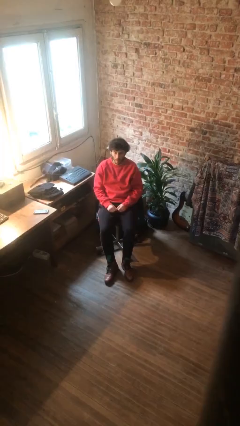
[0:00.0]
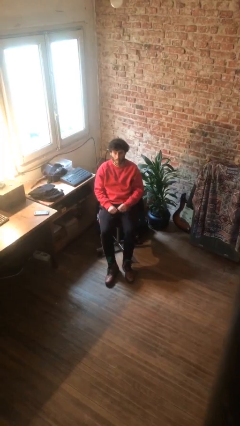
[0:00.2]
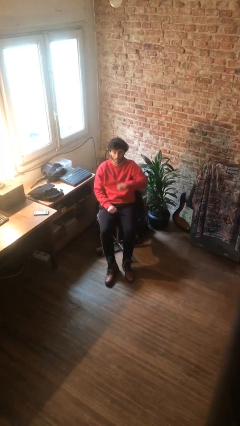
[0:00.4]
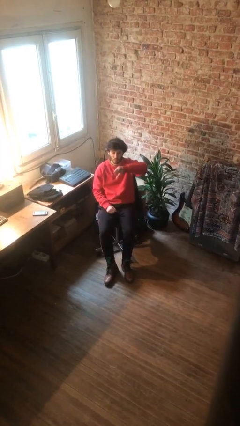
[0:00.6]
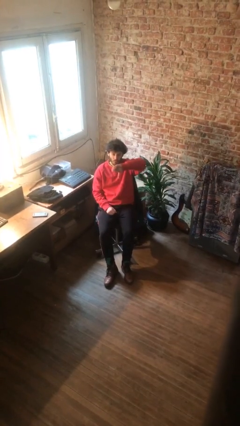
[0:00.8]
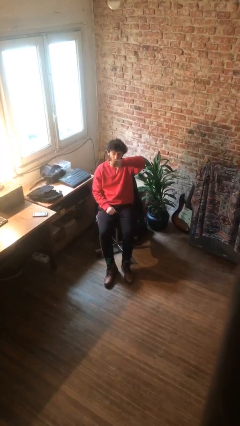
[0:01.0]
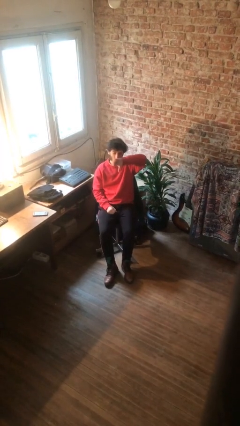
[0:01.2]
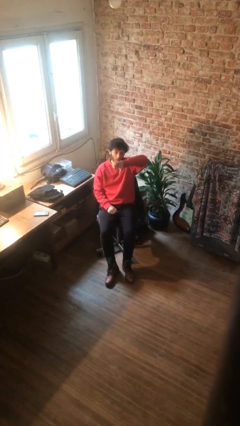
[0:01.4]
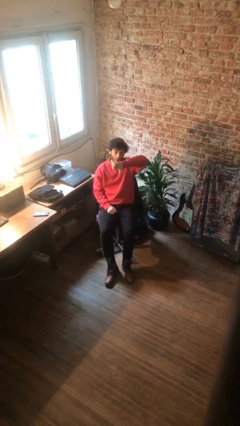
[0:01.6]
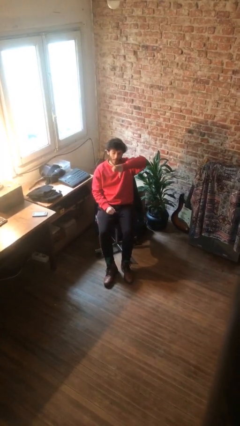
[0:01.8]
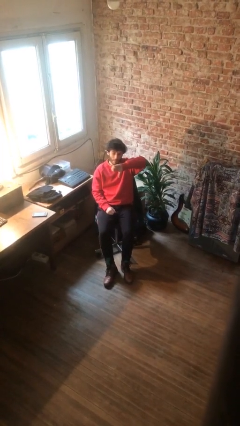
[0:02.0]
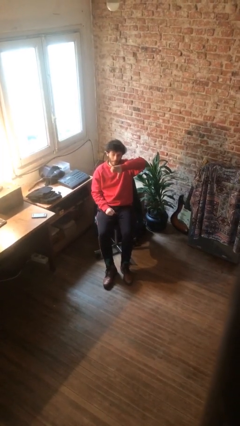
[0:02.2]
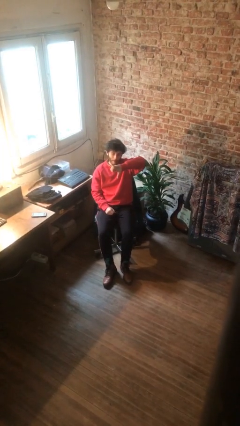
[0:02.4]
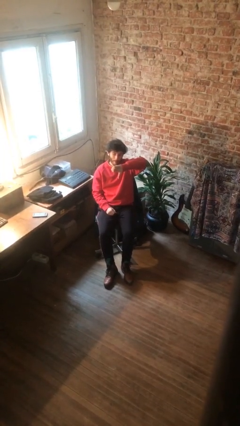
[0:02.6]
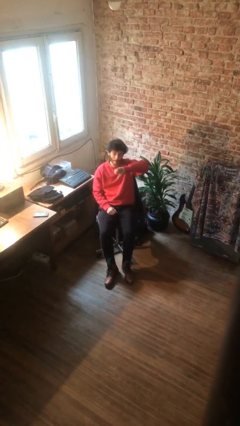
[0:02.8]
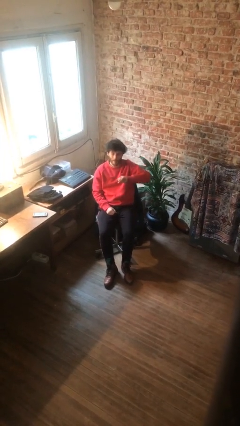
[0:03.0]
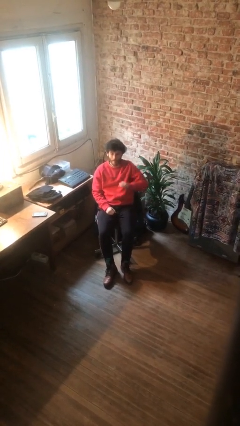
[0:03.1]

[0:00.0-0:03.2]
person gestures thumbs down

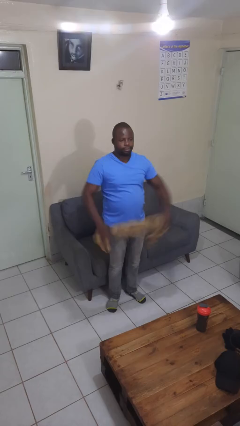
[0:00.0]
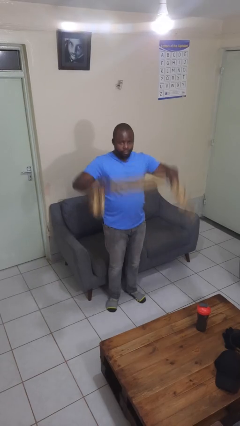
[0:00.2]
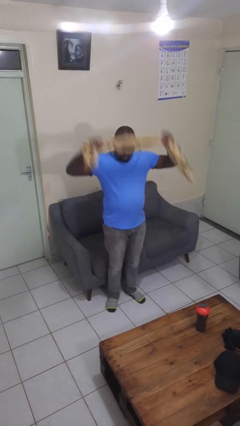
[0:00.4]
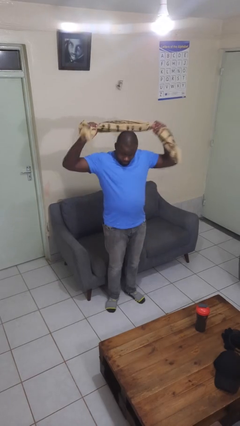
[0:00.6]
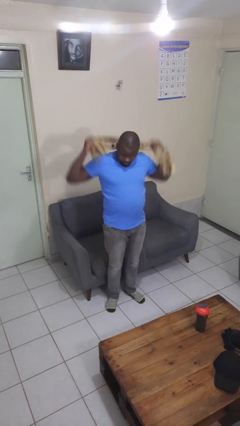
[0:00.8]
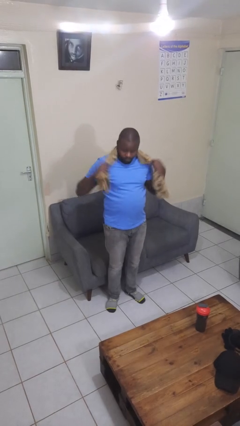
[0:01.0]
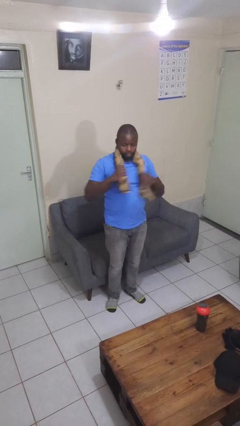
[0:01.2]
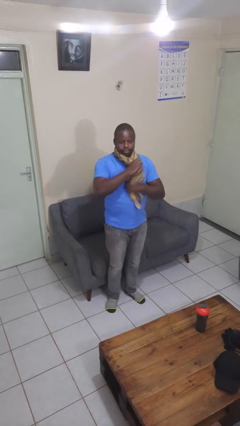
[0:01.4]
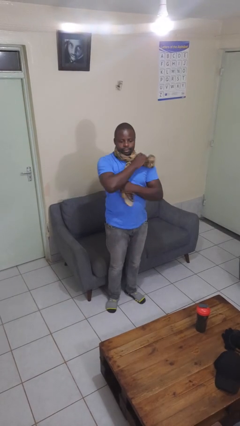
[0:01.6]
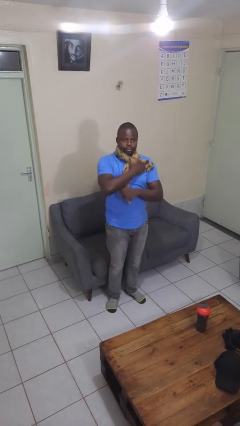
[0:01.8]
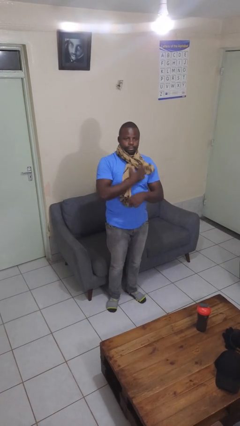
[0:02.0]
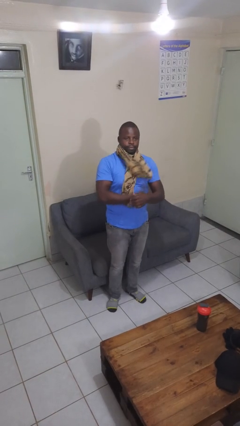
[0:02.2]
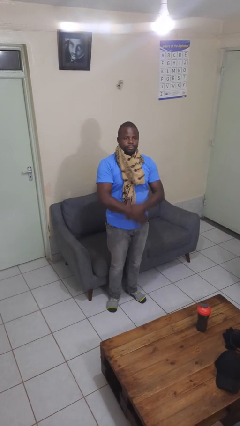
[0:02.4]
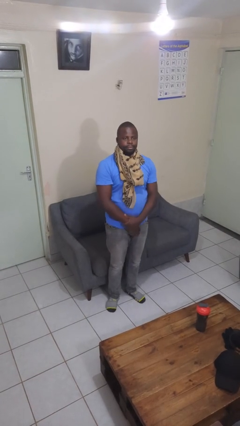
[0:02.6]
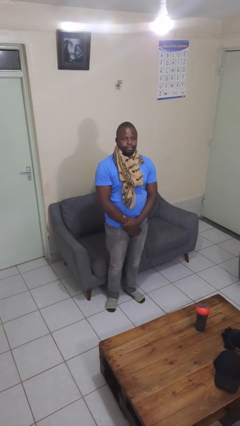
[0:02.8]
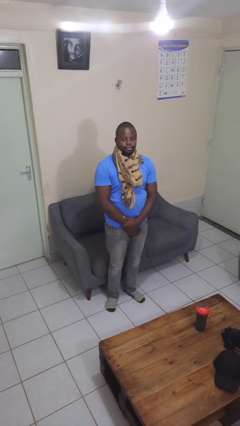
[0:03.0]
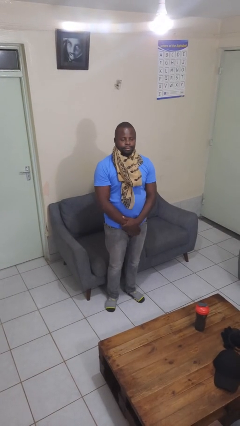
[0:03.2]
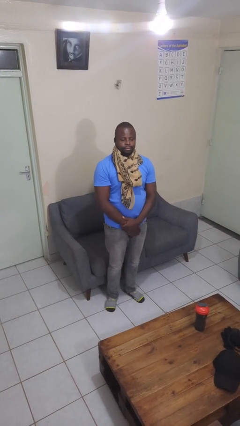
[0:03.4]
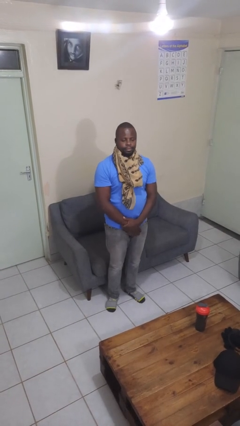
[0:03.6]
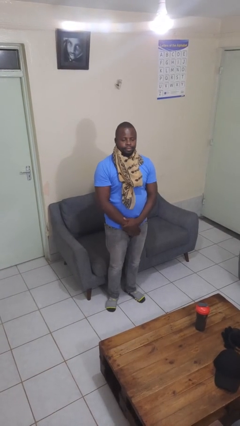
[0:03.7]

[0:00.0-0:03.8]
person puts on scarf

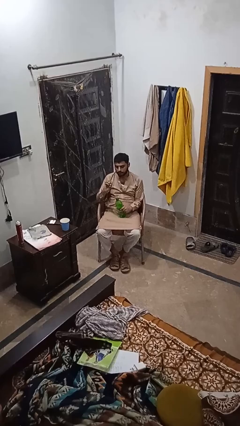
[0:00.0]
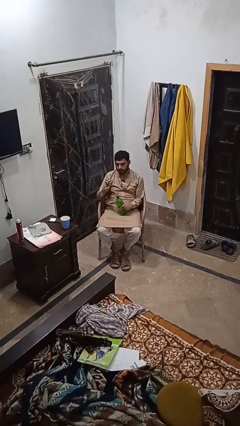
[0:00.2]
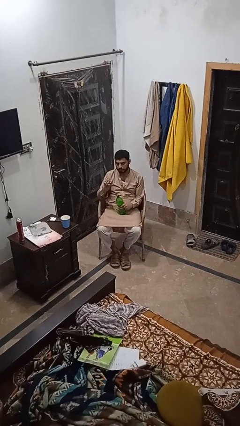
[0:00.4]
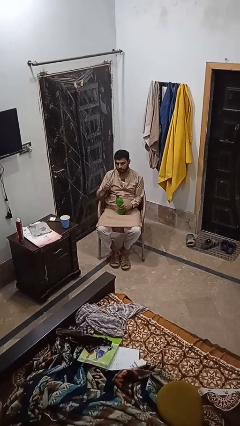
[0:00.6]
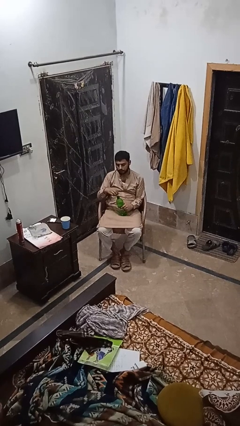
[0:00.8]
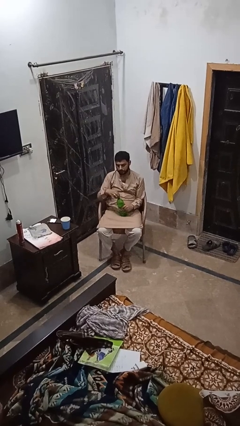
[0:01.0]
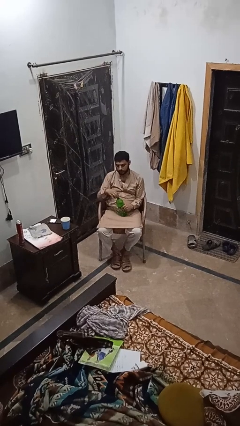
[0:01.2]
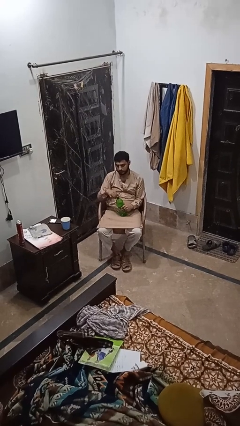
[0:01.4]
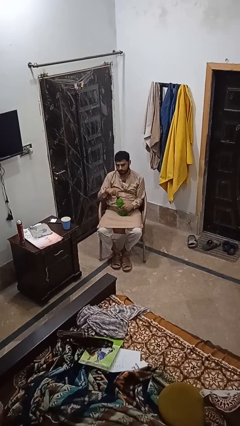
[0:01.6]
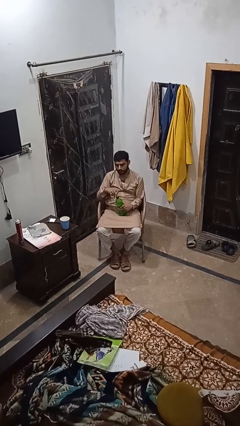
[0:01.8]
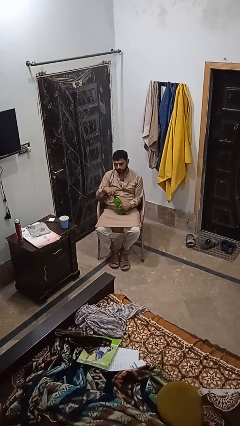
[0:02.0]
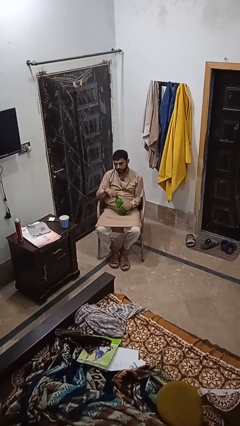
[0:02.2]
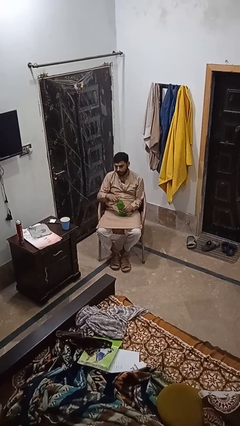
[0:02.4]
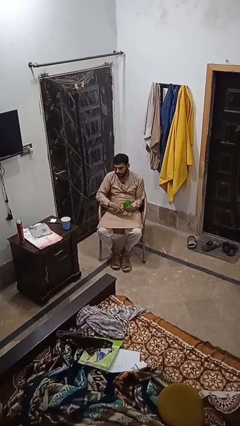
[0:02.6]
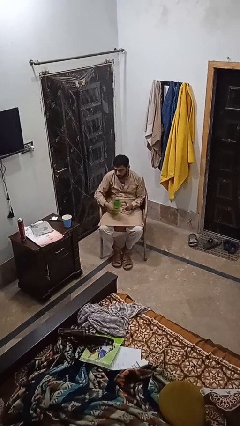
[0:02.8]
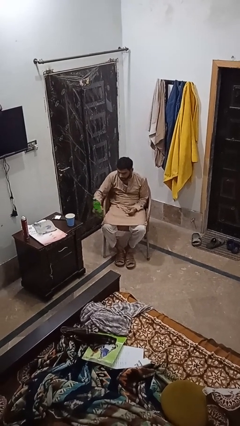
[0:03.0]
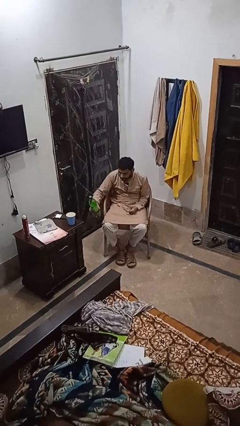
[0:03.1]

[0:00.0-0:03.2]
person screws lid to bottle

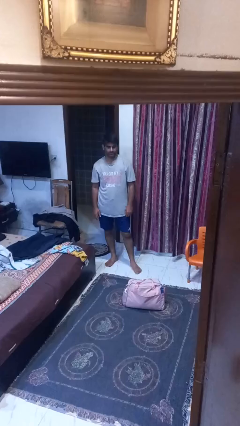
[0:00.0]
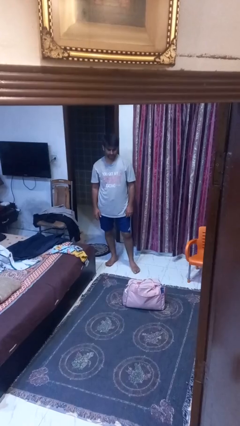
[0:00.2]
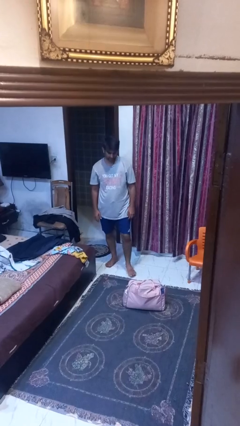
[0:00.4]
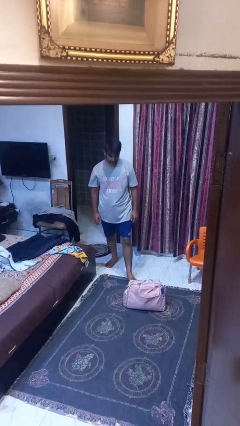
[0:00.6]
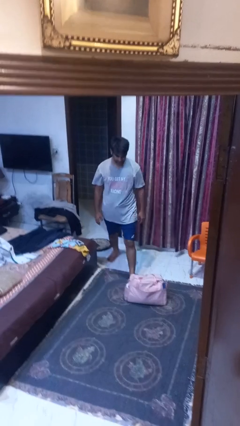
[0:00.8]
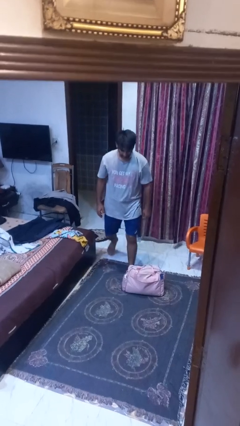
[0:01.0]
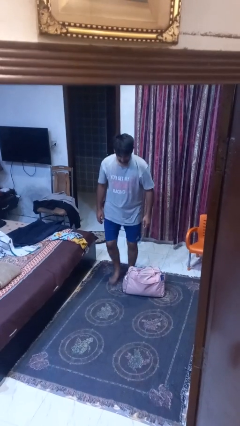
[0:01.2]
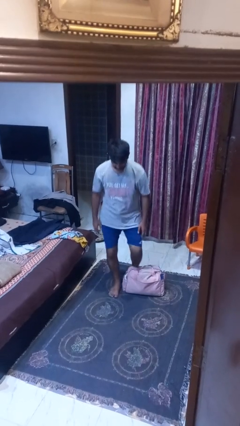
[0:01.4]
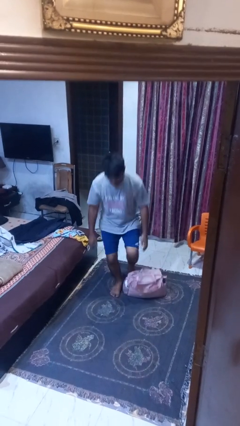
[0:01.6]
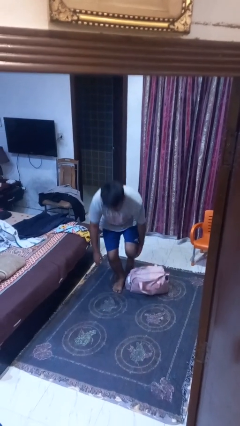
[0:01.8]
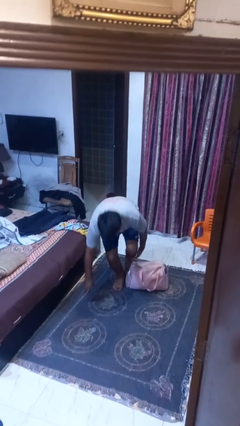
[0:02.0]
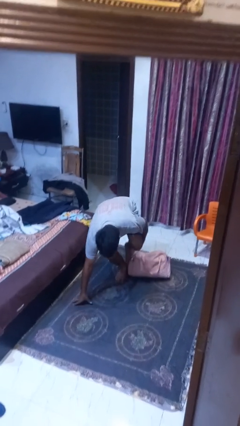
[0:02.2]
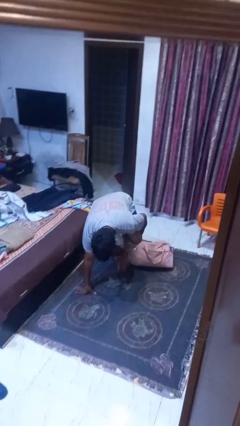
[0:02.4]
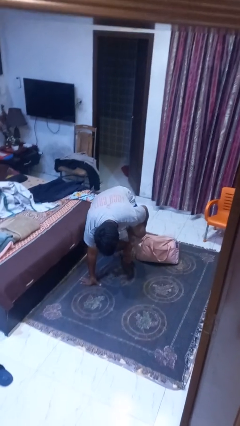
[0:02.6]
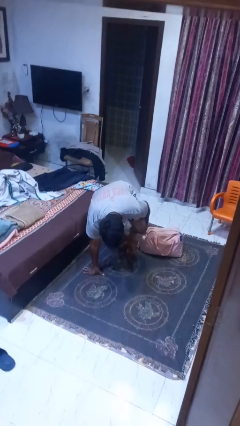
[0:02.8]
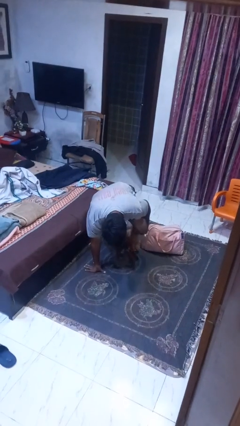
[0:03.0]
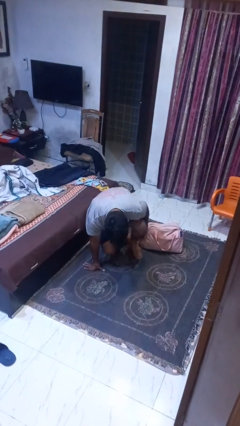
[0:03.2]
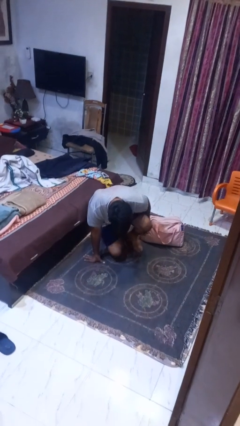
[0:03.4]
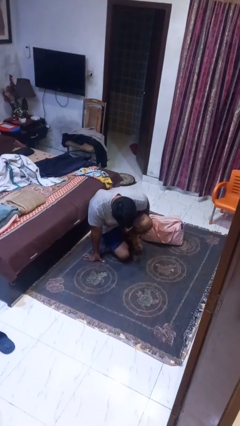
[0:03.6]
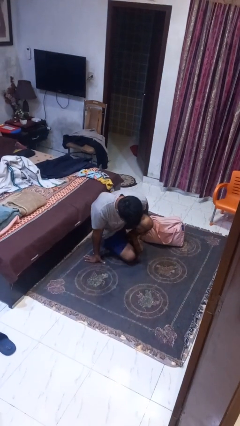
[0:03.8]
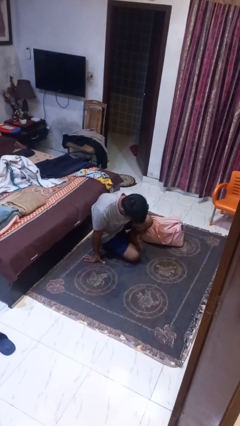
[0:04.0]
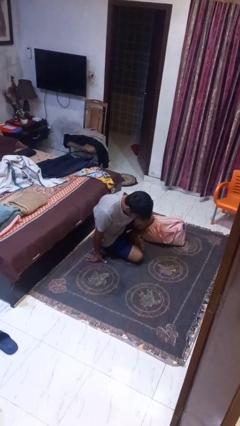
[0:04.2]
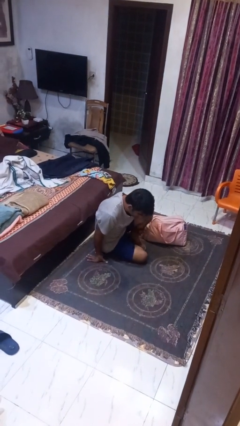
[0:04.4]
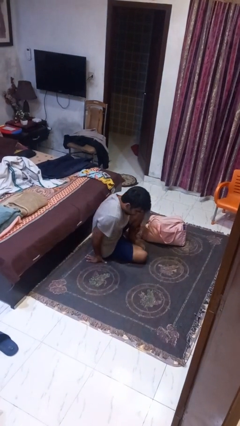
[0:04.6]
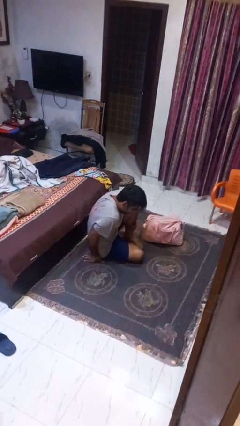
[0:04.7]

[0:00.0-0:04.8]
person trips on object on floor

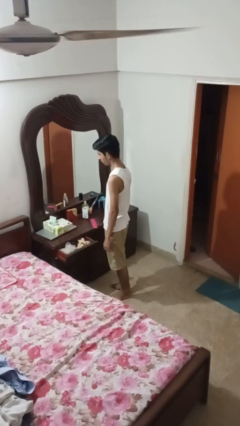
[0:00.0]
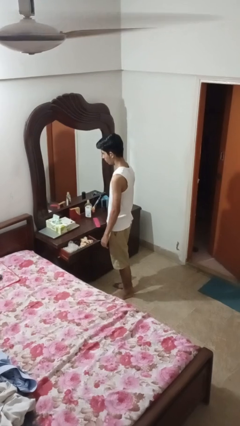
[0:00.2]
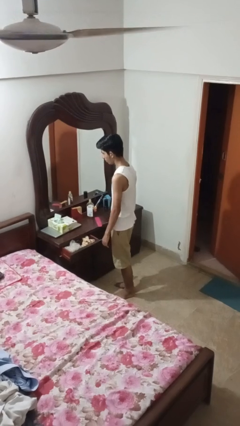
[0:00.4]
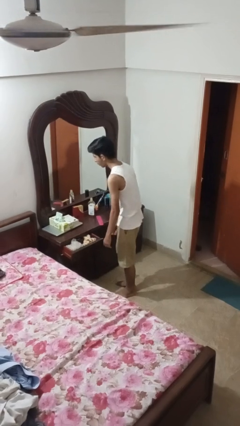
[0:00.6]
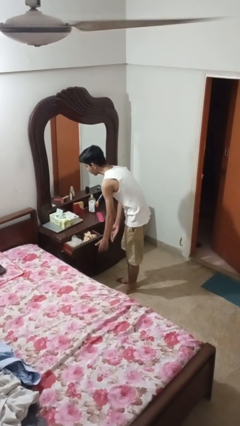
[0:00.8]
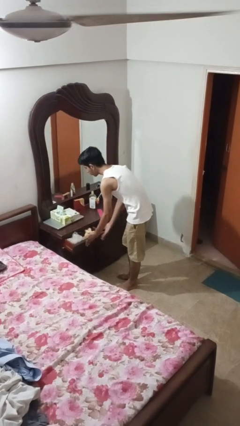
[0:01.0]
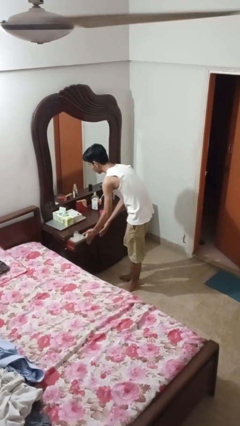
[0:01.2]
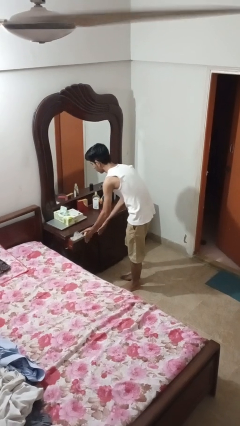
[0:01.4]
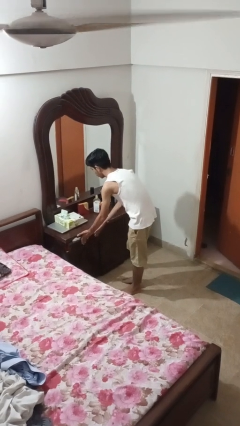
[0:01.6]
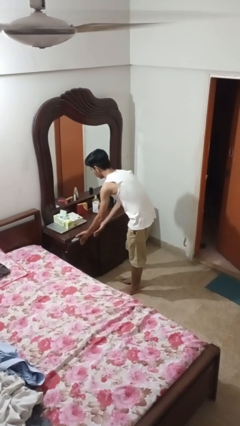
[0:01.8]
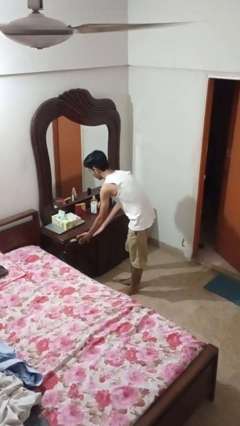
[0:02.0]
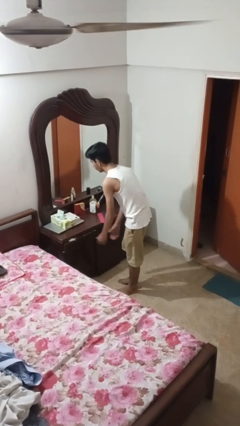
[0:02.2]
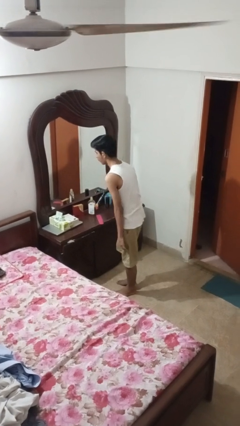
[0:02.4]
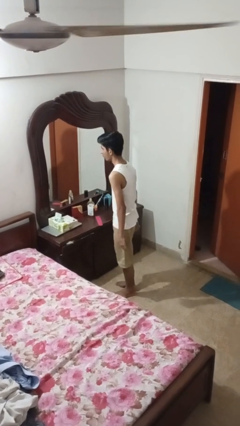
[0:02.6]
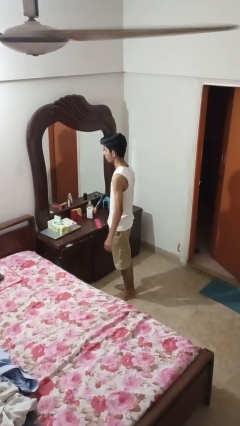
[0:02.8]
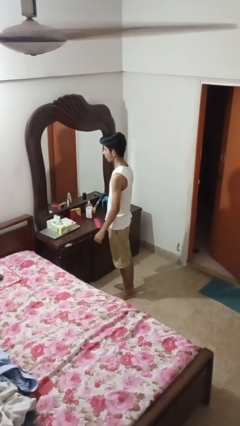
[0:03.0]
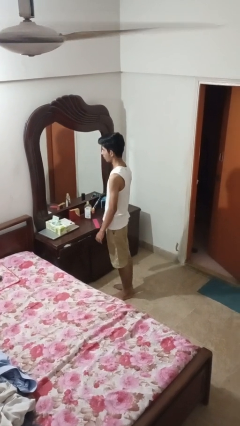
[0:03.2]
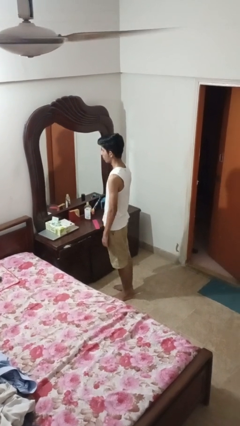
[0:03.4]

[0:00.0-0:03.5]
person closes dresser drawer
